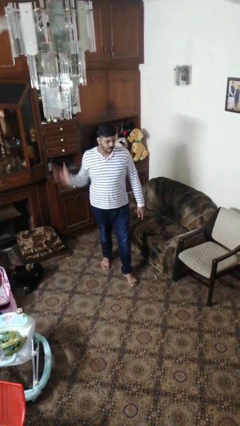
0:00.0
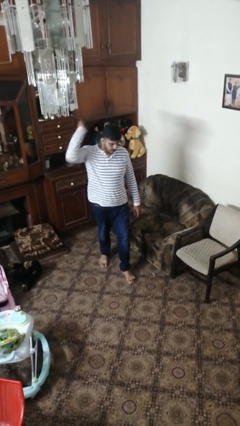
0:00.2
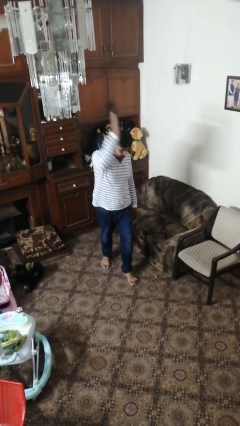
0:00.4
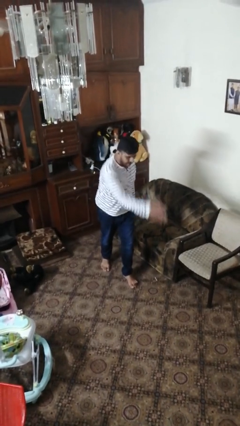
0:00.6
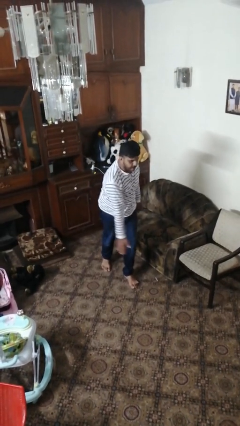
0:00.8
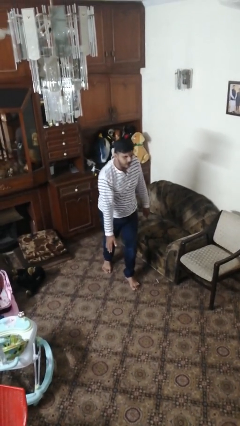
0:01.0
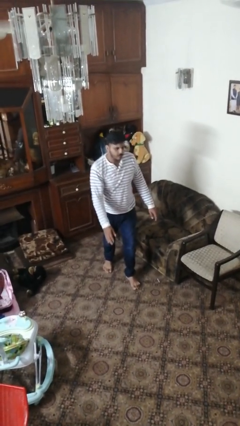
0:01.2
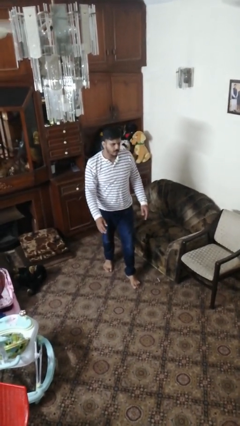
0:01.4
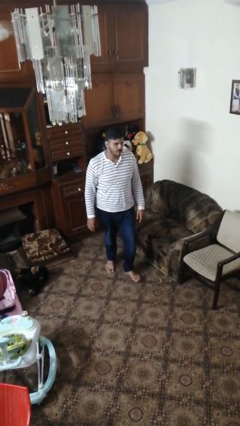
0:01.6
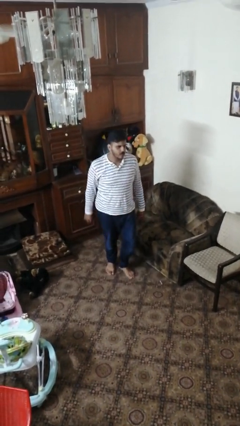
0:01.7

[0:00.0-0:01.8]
person karate chop

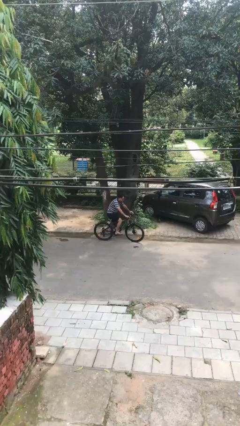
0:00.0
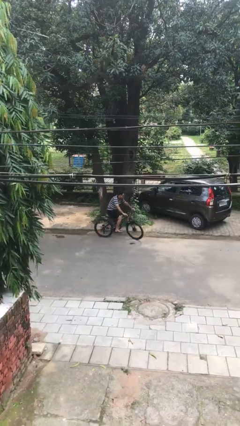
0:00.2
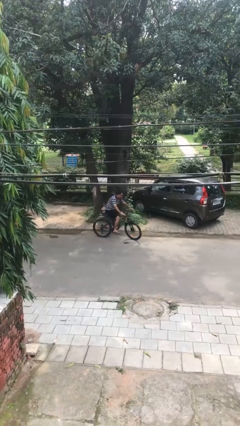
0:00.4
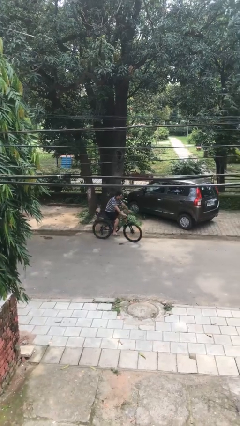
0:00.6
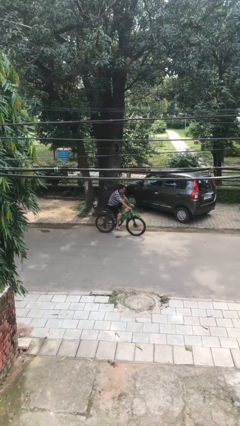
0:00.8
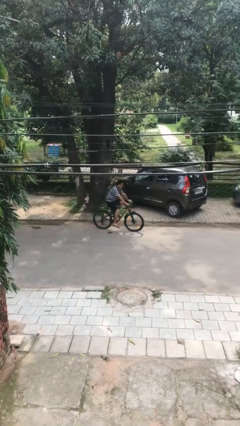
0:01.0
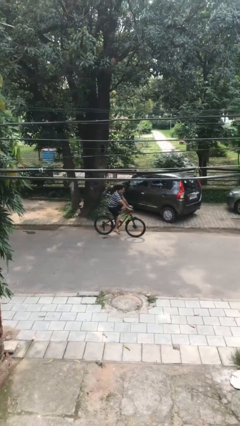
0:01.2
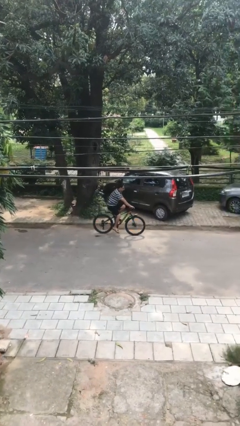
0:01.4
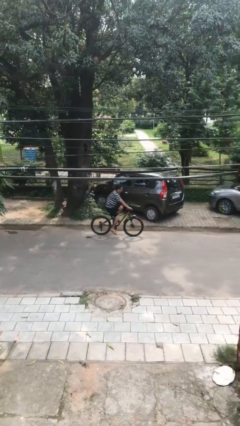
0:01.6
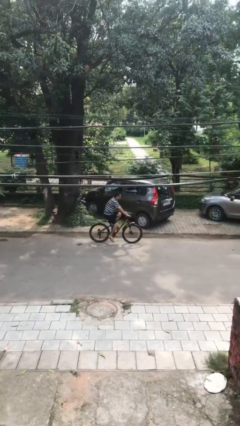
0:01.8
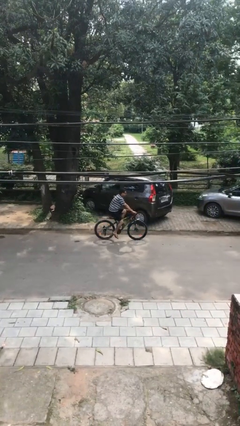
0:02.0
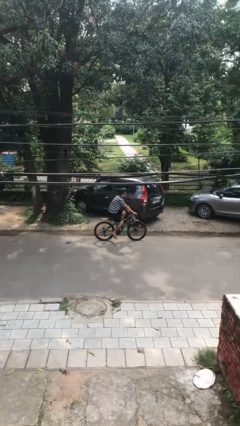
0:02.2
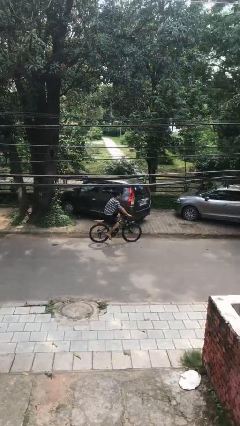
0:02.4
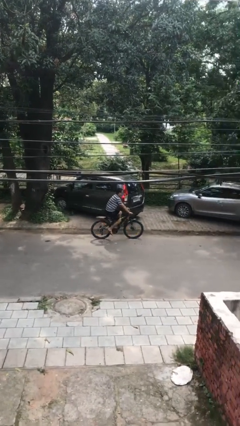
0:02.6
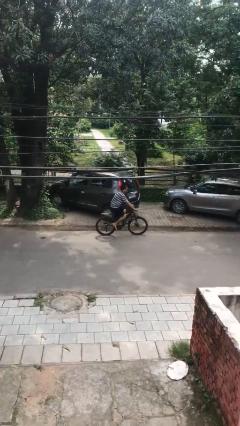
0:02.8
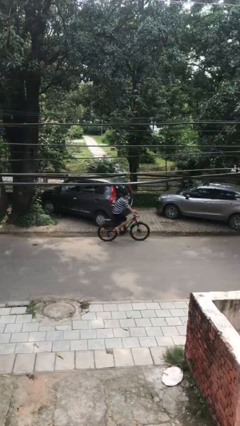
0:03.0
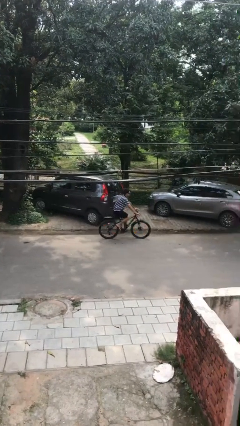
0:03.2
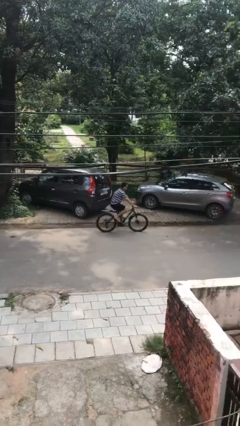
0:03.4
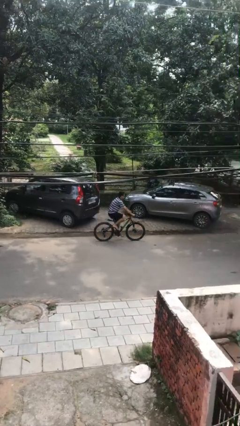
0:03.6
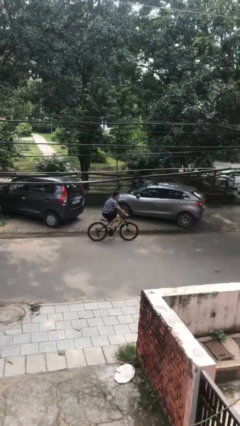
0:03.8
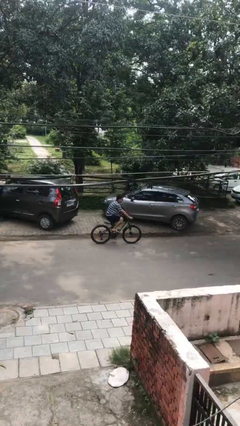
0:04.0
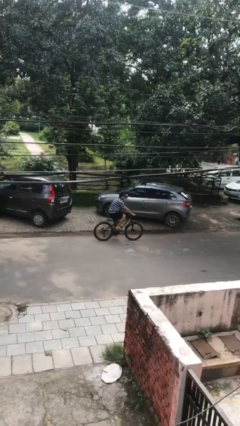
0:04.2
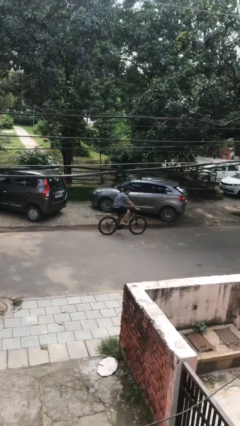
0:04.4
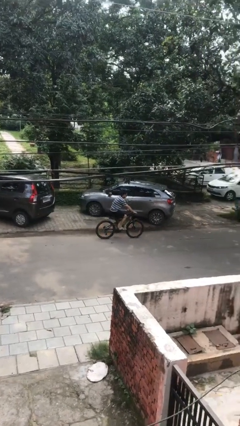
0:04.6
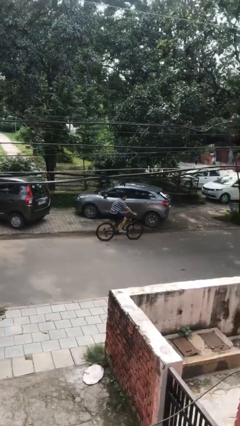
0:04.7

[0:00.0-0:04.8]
person rides bicycle

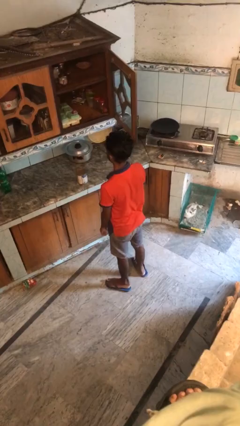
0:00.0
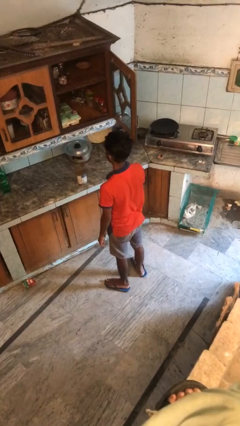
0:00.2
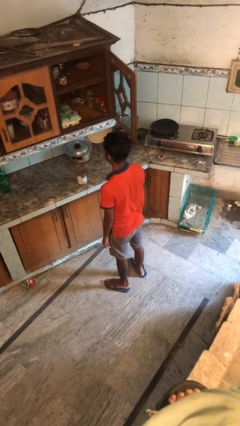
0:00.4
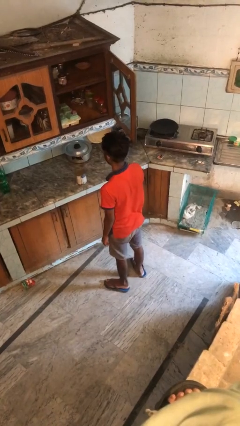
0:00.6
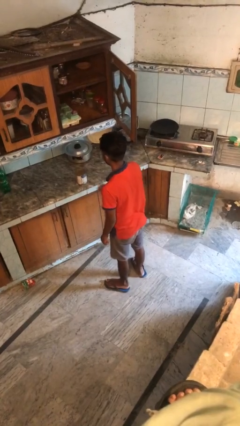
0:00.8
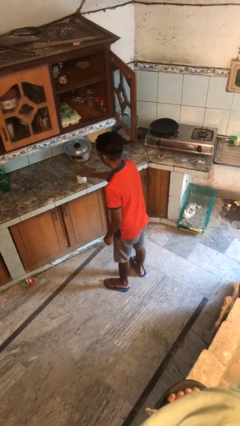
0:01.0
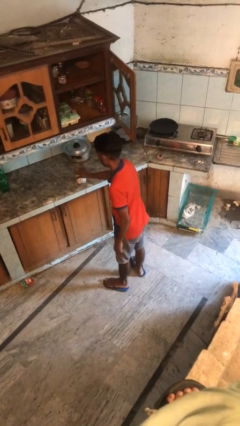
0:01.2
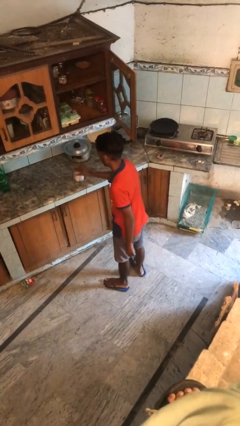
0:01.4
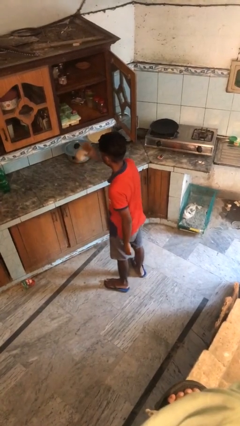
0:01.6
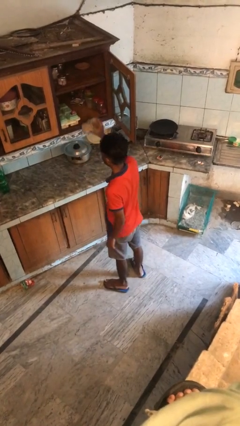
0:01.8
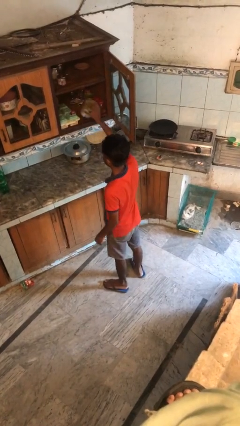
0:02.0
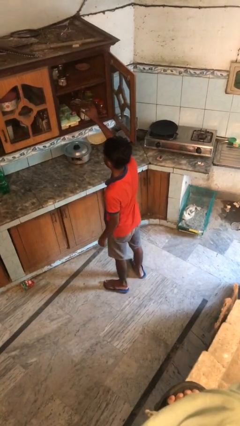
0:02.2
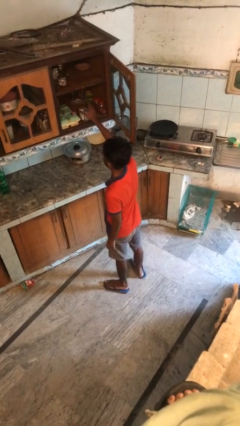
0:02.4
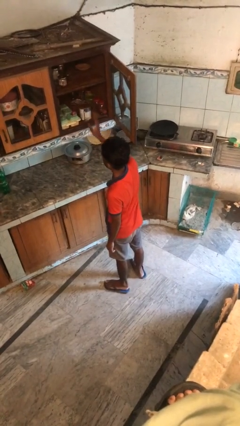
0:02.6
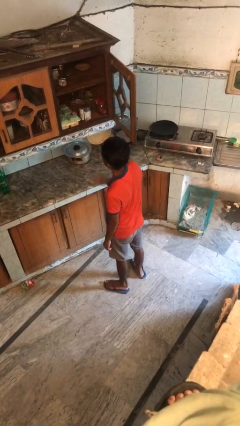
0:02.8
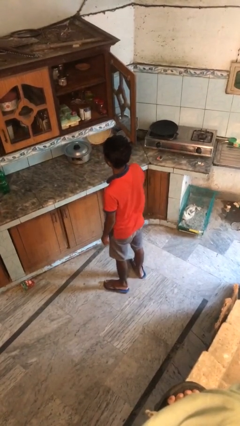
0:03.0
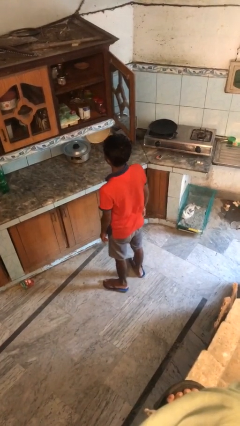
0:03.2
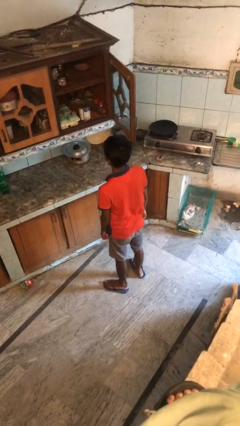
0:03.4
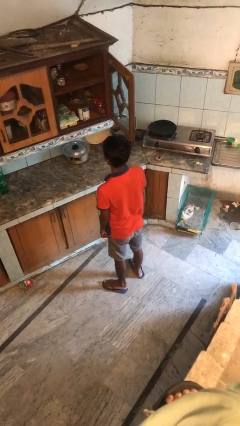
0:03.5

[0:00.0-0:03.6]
person puts object in cabinet

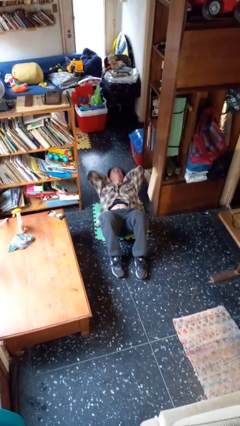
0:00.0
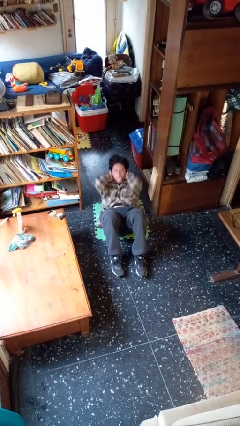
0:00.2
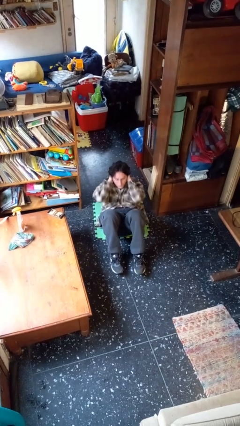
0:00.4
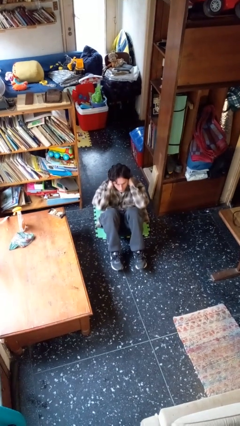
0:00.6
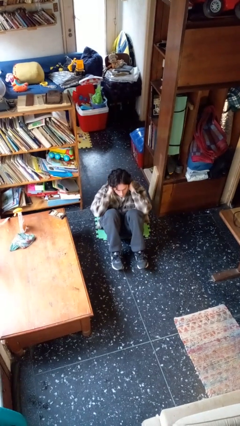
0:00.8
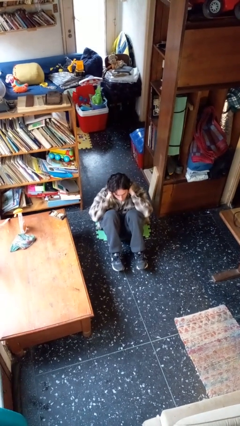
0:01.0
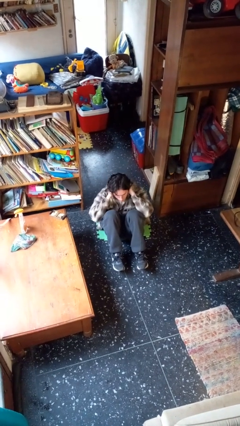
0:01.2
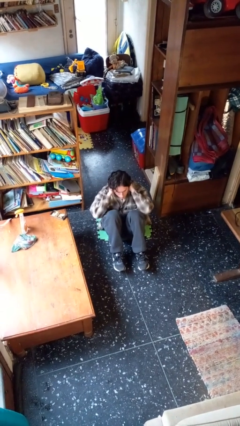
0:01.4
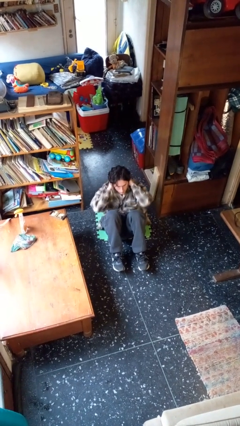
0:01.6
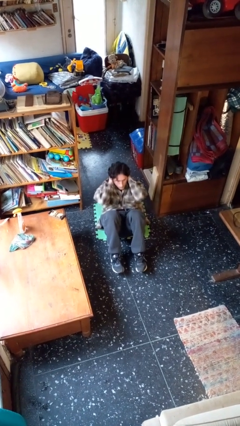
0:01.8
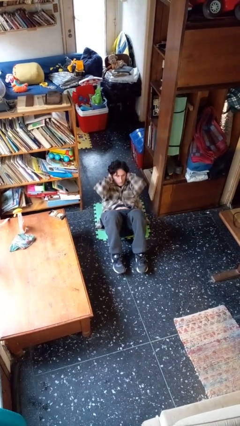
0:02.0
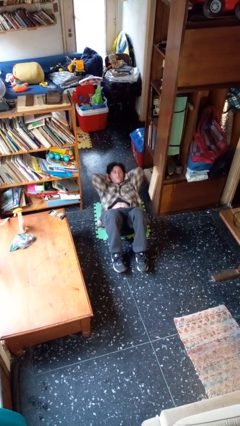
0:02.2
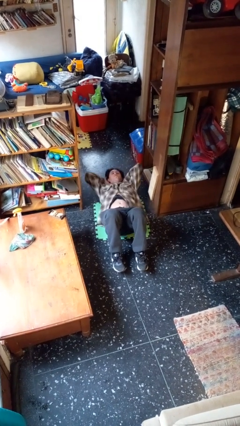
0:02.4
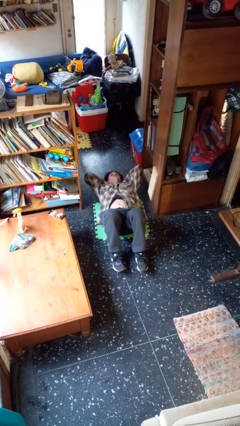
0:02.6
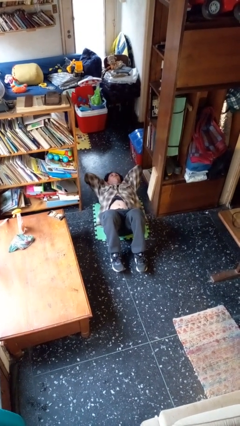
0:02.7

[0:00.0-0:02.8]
person exercises with situp

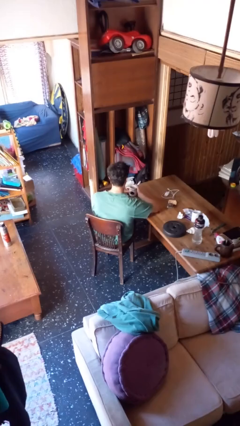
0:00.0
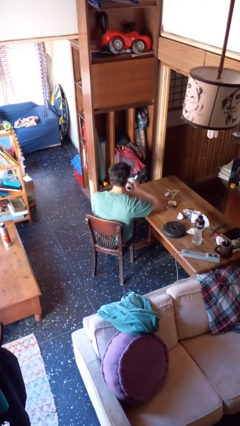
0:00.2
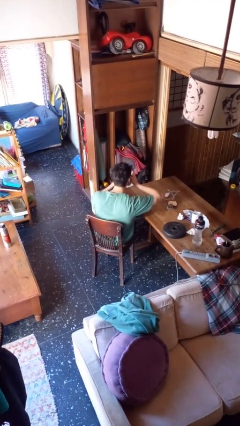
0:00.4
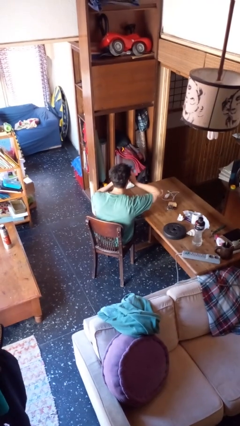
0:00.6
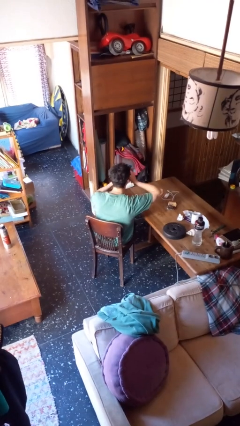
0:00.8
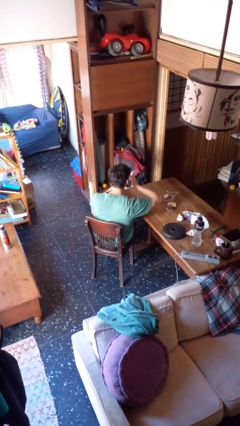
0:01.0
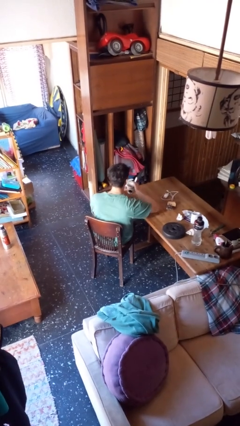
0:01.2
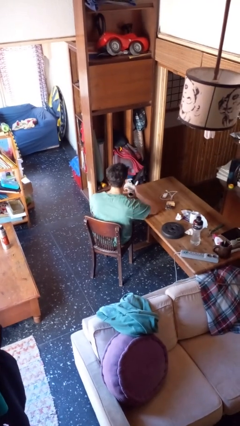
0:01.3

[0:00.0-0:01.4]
person drinks from mug

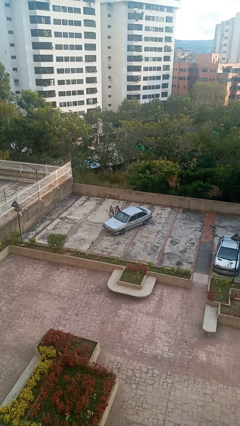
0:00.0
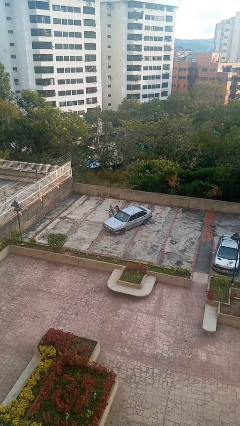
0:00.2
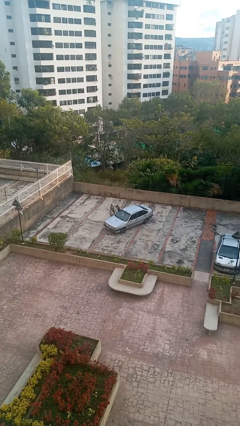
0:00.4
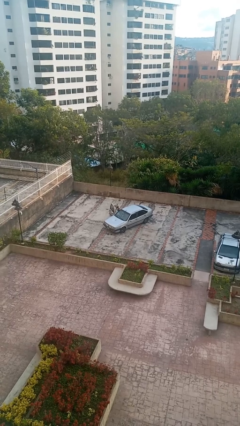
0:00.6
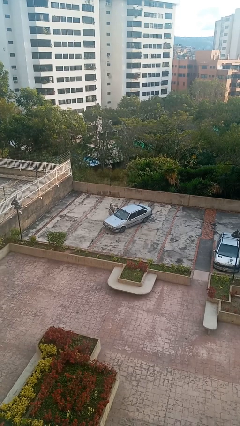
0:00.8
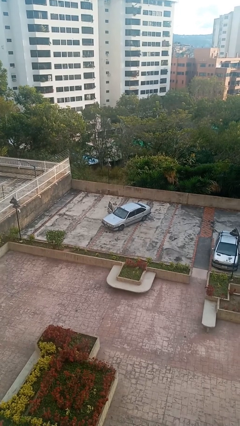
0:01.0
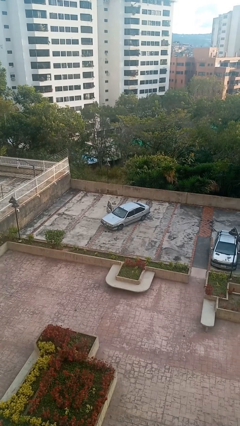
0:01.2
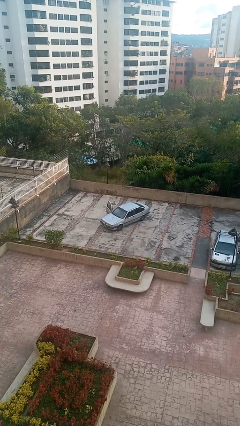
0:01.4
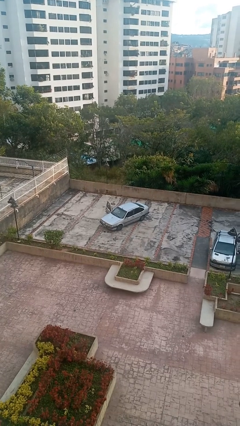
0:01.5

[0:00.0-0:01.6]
person enters car

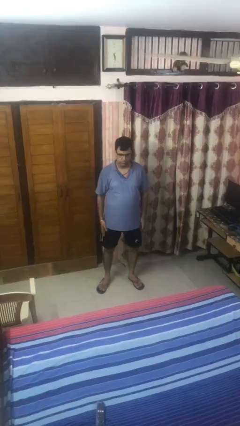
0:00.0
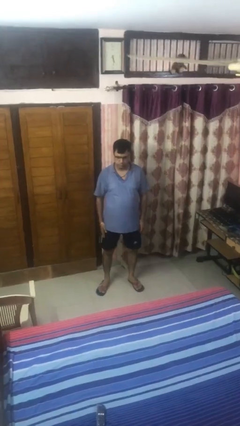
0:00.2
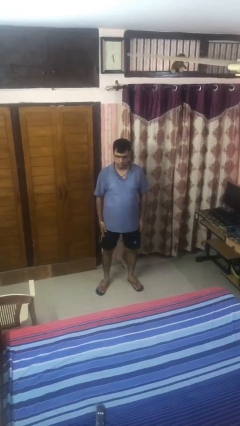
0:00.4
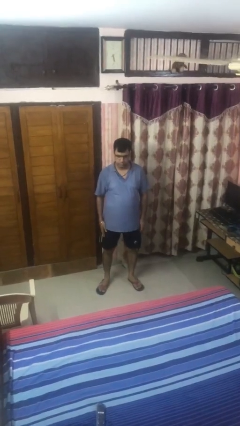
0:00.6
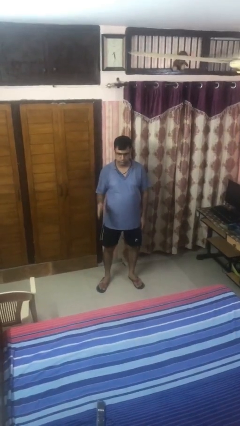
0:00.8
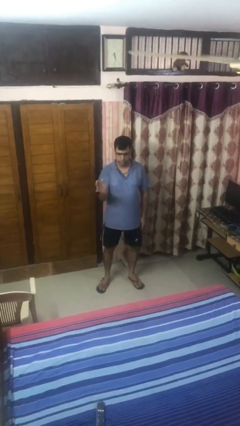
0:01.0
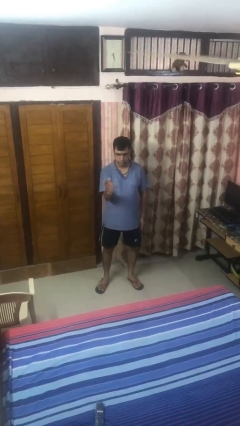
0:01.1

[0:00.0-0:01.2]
person gestures swipe left
